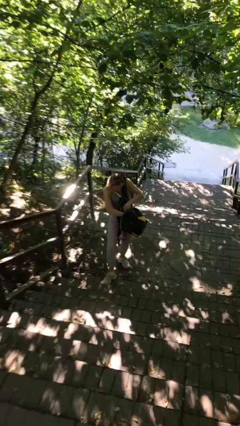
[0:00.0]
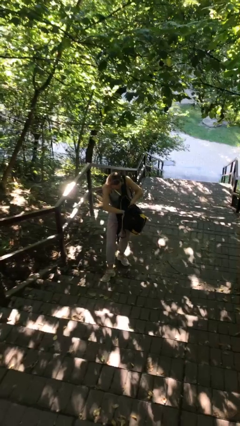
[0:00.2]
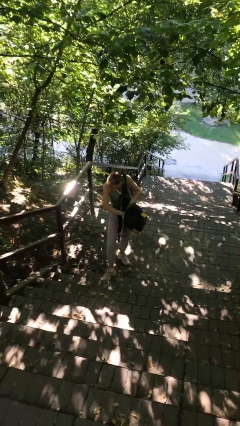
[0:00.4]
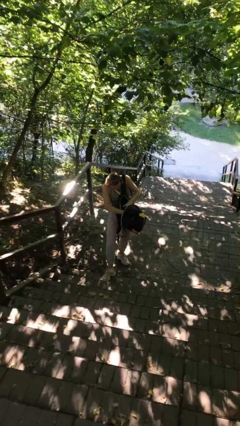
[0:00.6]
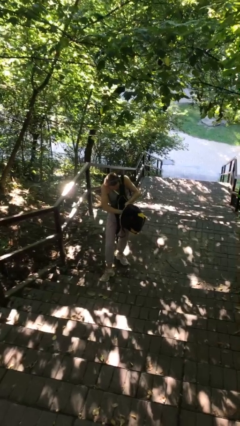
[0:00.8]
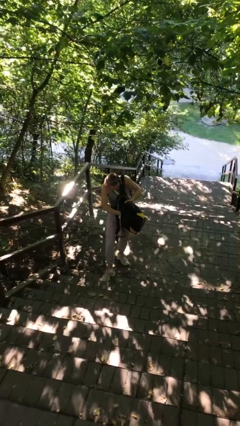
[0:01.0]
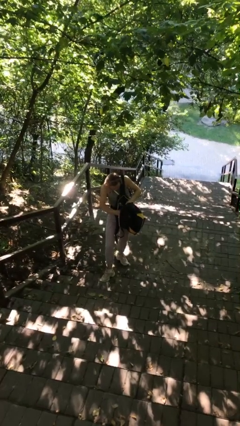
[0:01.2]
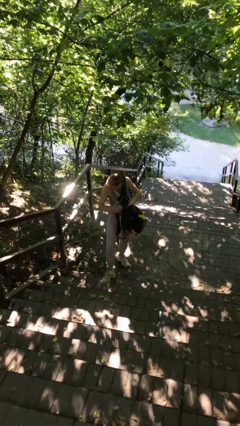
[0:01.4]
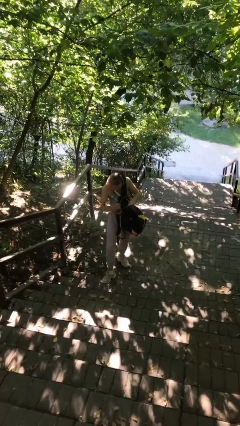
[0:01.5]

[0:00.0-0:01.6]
person searches in backpack

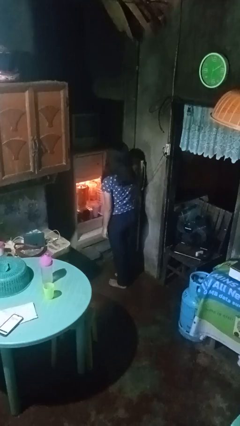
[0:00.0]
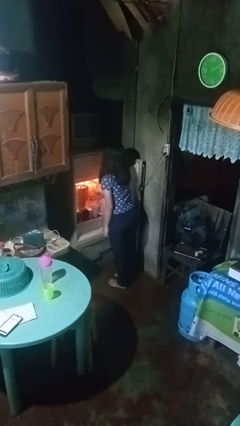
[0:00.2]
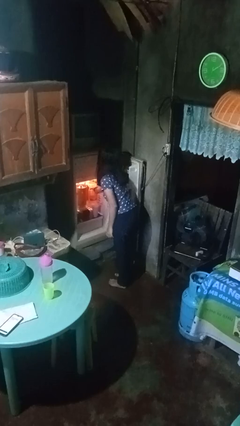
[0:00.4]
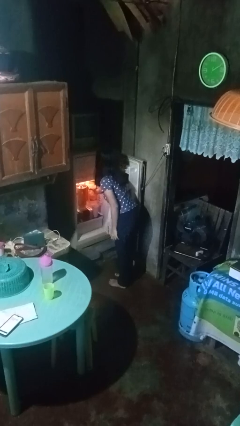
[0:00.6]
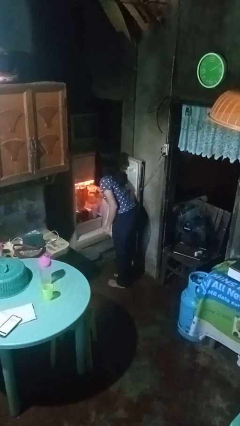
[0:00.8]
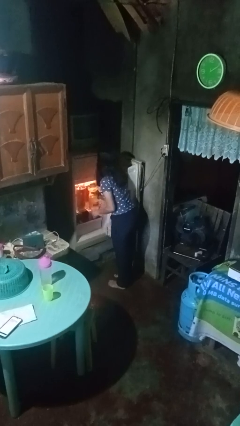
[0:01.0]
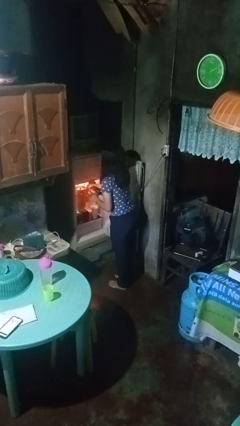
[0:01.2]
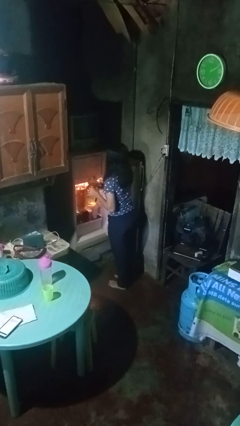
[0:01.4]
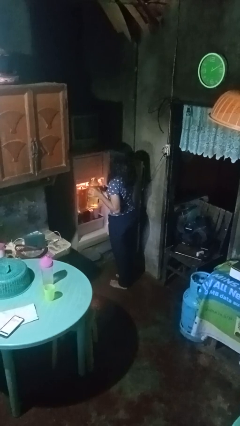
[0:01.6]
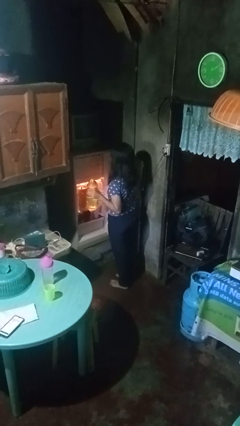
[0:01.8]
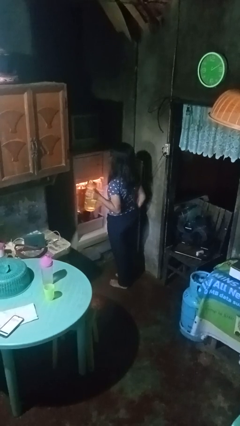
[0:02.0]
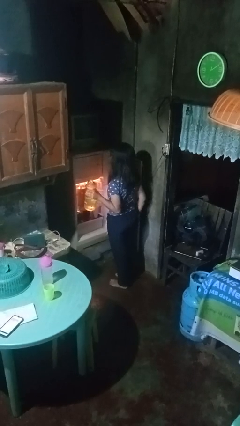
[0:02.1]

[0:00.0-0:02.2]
person takes object from refrigerator

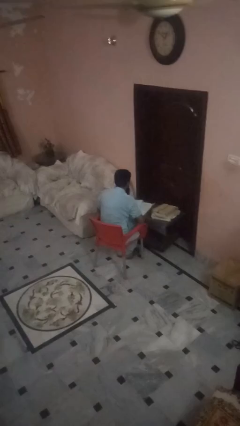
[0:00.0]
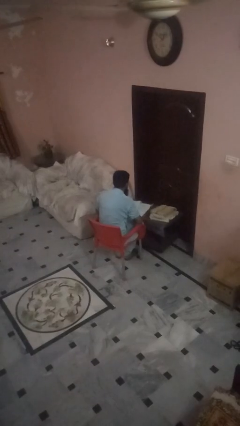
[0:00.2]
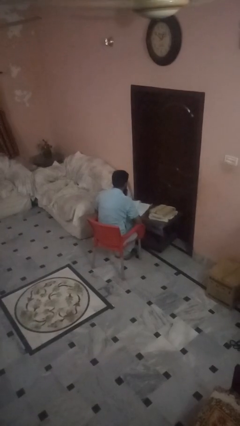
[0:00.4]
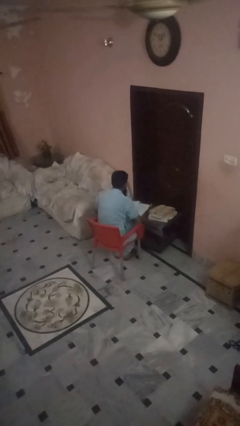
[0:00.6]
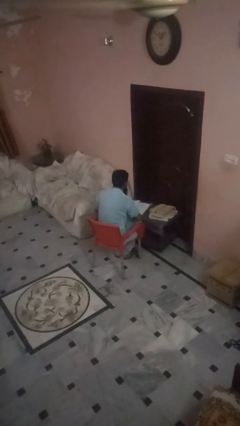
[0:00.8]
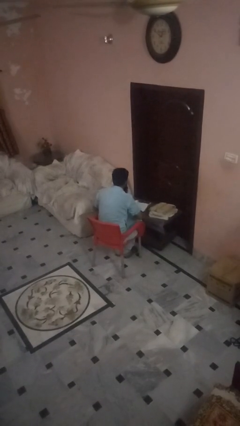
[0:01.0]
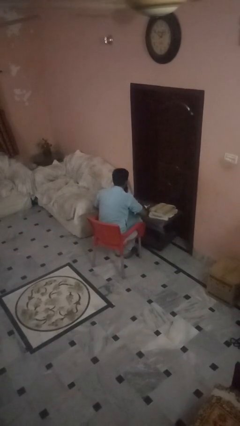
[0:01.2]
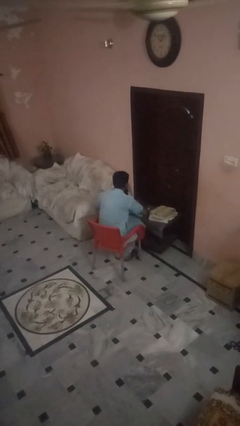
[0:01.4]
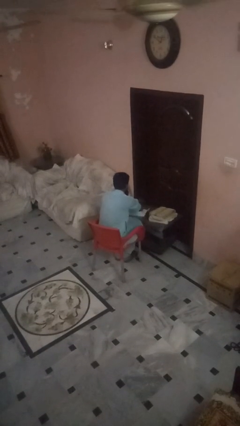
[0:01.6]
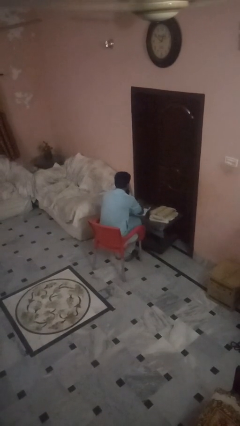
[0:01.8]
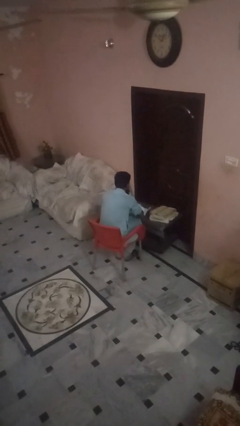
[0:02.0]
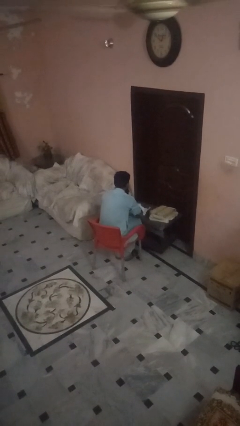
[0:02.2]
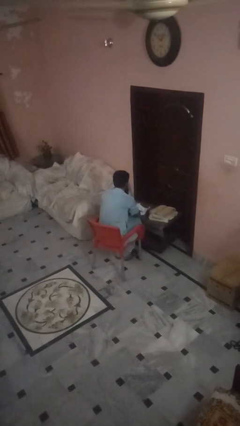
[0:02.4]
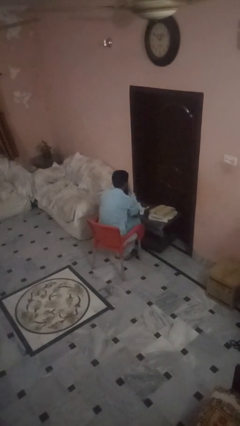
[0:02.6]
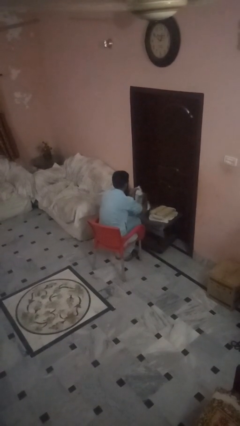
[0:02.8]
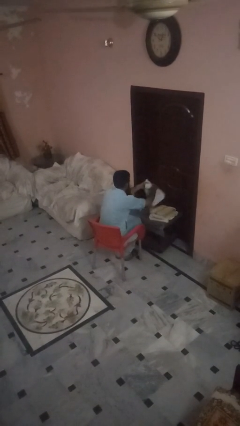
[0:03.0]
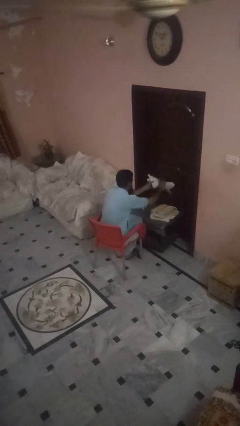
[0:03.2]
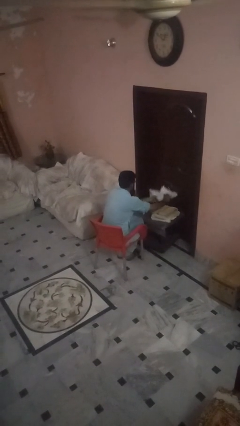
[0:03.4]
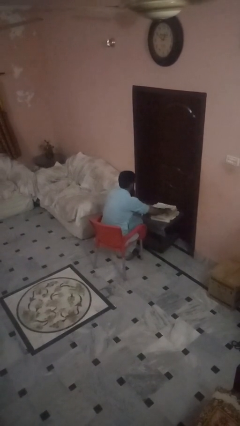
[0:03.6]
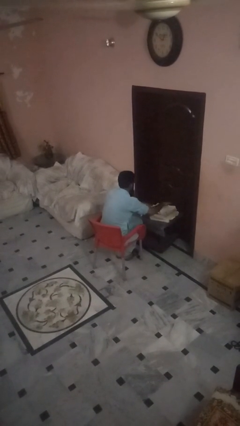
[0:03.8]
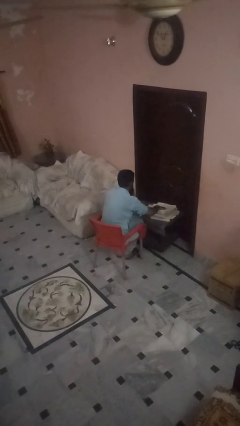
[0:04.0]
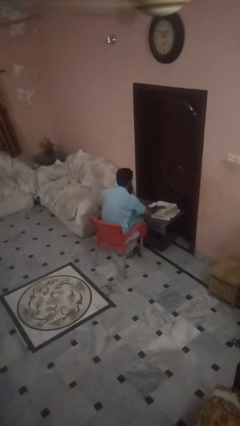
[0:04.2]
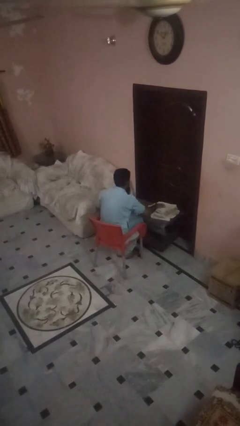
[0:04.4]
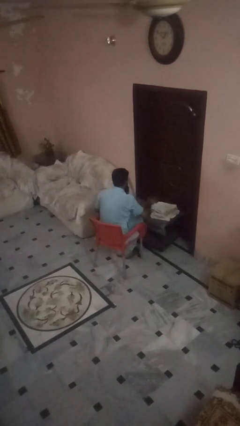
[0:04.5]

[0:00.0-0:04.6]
person folds towel

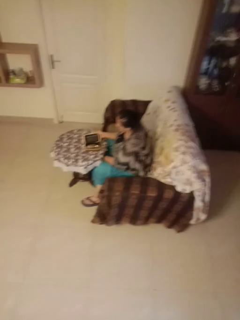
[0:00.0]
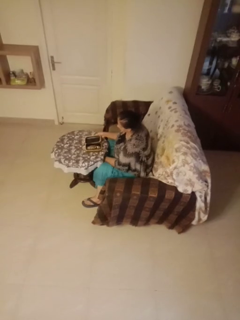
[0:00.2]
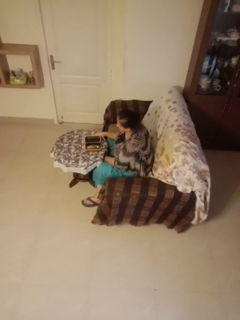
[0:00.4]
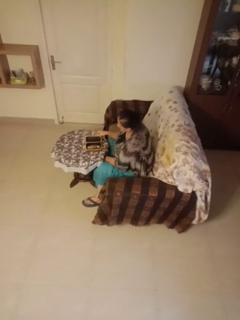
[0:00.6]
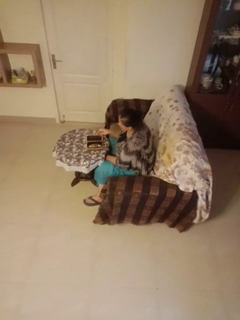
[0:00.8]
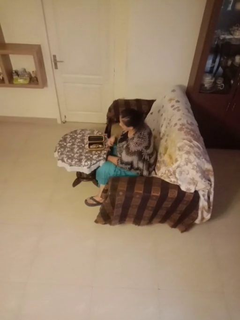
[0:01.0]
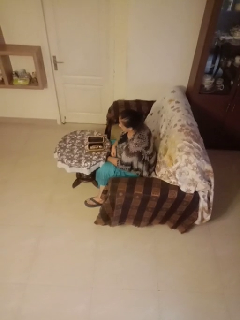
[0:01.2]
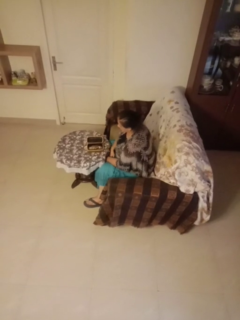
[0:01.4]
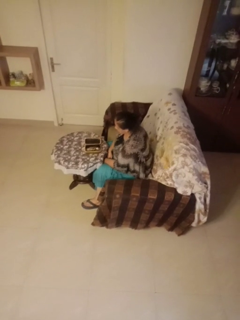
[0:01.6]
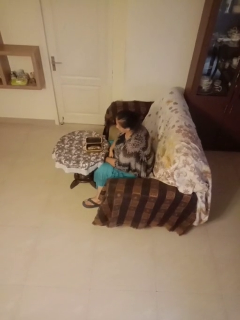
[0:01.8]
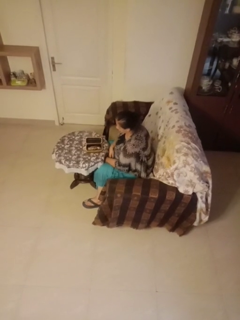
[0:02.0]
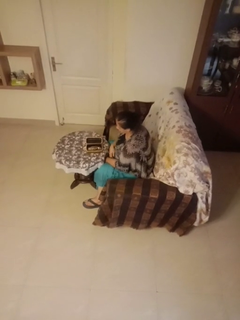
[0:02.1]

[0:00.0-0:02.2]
person opens jewelry box

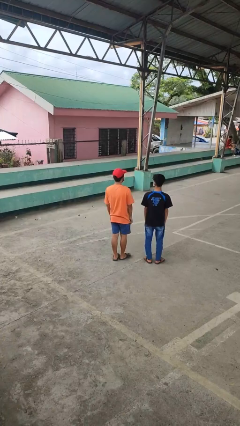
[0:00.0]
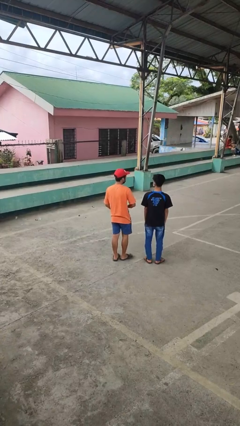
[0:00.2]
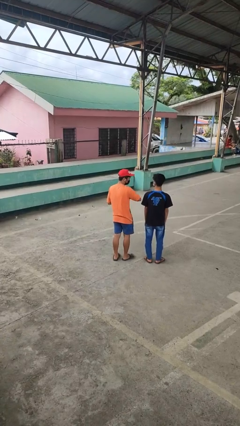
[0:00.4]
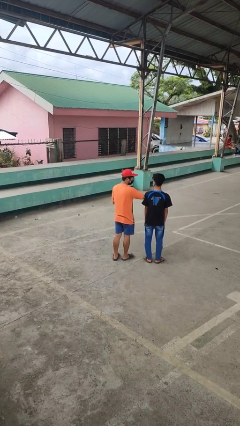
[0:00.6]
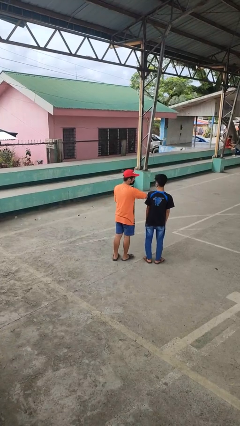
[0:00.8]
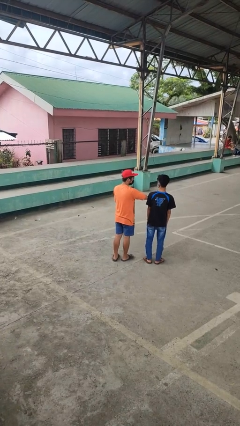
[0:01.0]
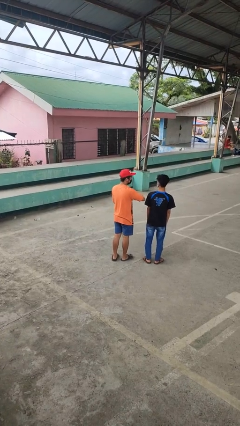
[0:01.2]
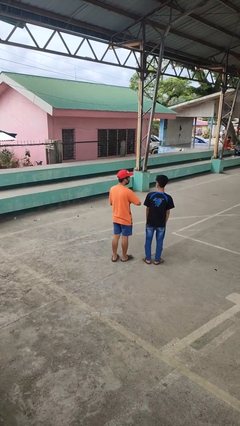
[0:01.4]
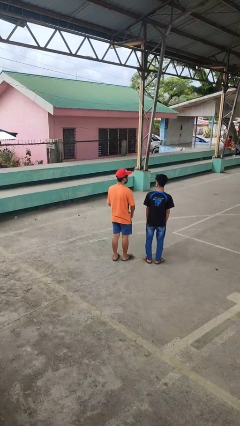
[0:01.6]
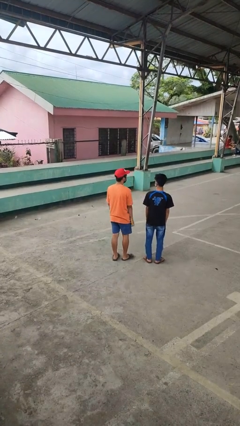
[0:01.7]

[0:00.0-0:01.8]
person nudges person with elbow

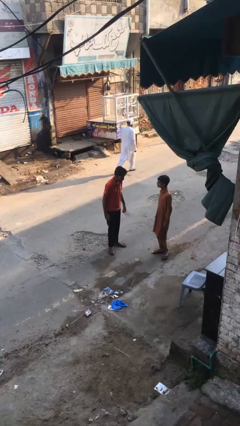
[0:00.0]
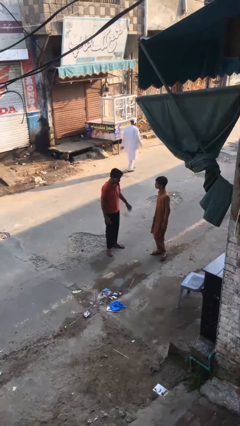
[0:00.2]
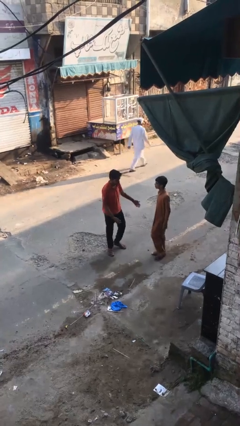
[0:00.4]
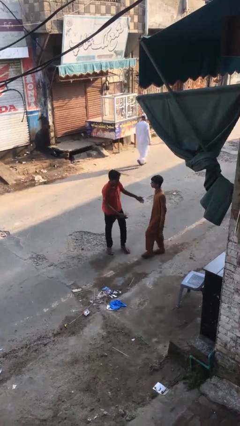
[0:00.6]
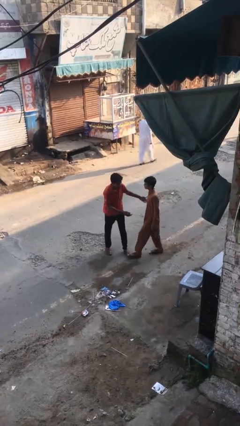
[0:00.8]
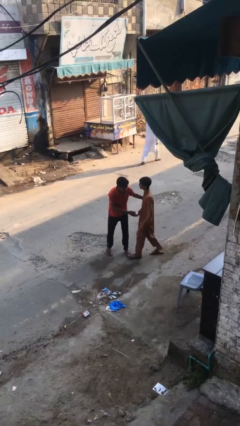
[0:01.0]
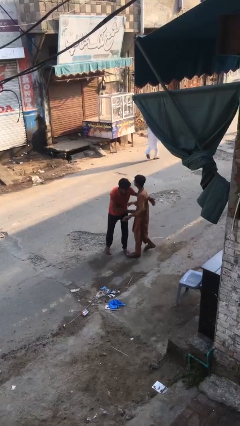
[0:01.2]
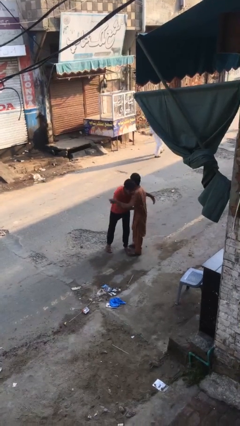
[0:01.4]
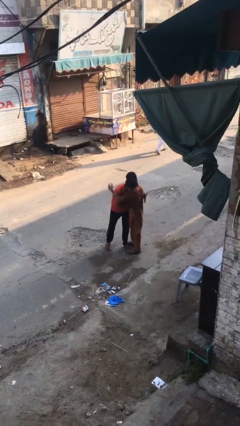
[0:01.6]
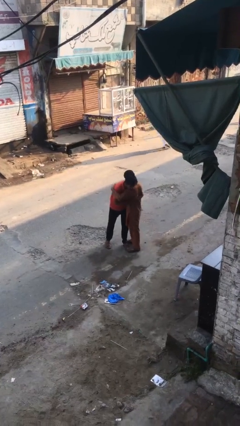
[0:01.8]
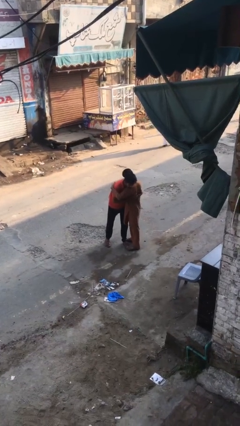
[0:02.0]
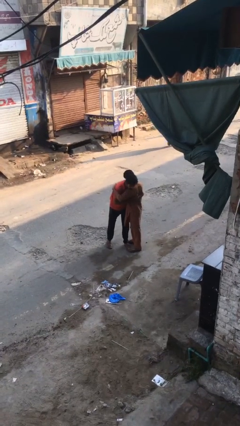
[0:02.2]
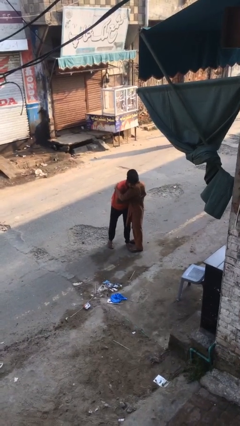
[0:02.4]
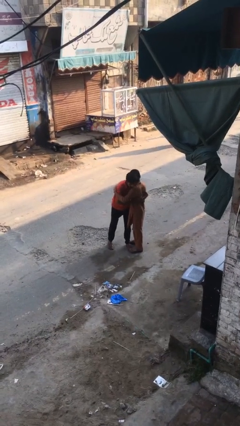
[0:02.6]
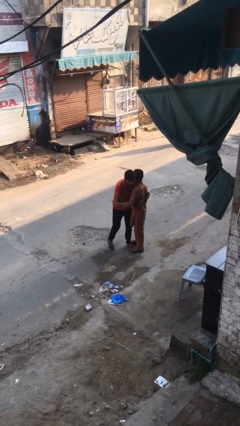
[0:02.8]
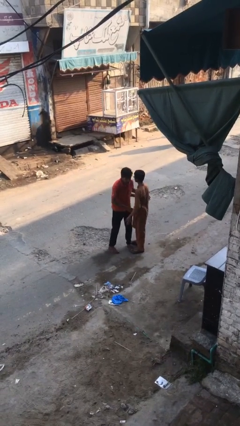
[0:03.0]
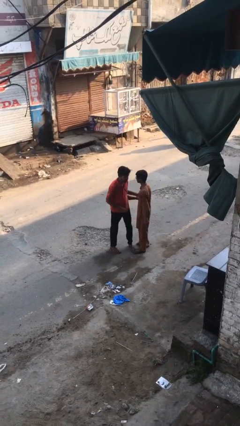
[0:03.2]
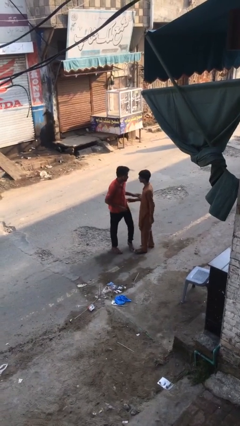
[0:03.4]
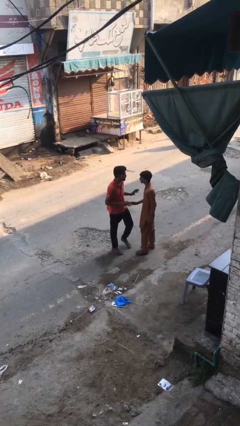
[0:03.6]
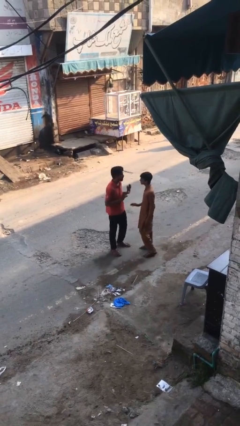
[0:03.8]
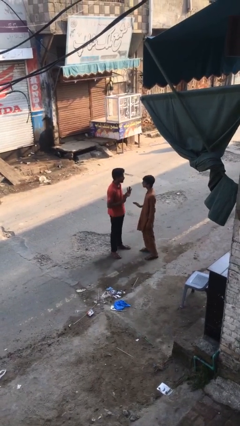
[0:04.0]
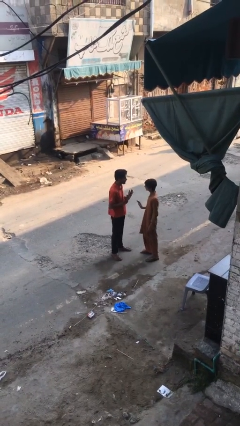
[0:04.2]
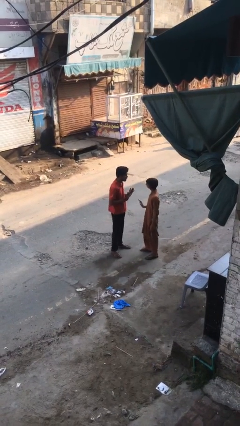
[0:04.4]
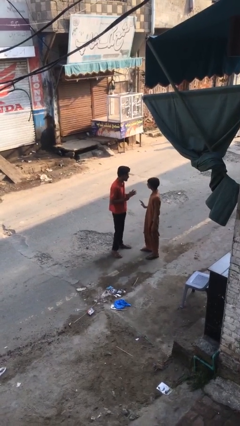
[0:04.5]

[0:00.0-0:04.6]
person embraces person

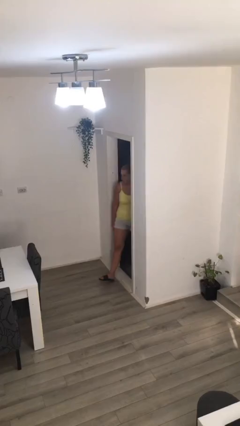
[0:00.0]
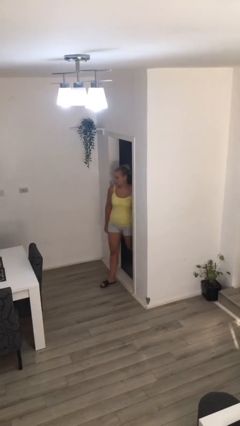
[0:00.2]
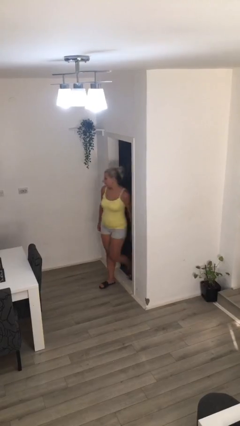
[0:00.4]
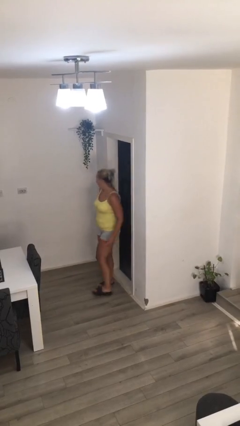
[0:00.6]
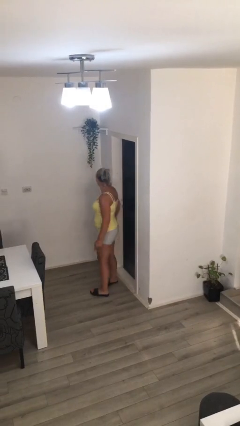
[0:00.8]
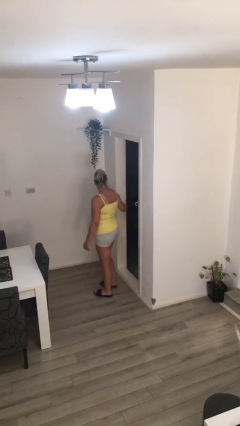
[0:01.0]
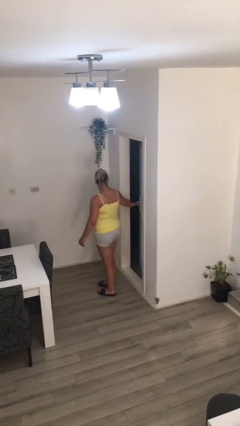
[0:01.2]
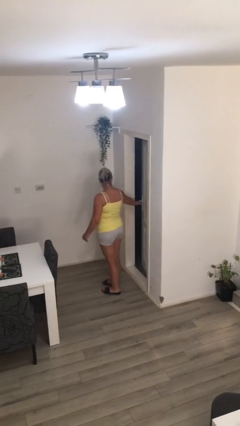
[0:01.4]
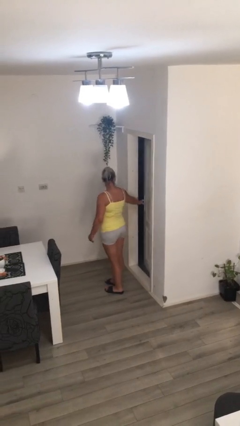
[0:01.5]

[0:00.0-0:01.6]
person enters scene through structure
